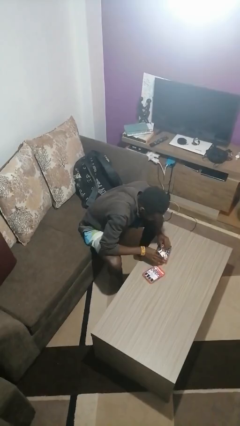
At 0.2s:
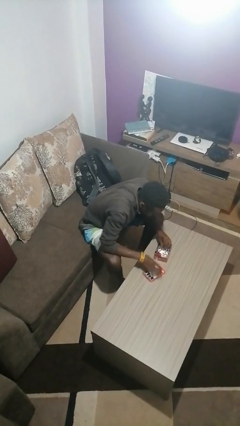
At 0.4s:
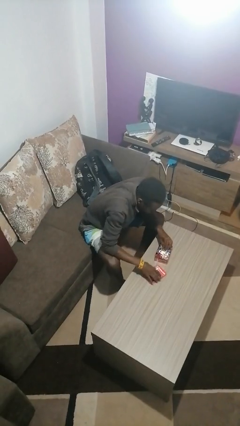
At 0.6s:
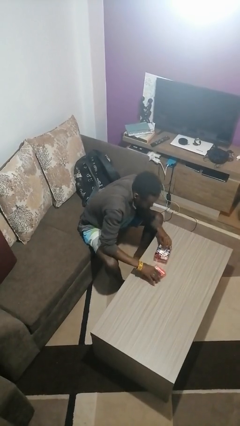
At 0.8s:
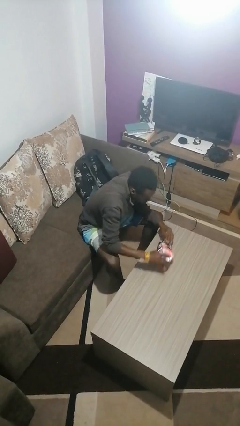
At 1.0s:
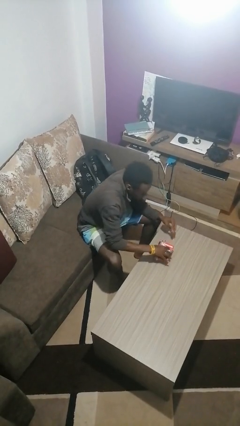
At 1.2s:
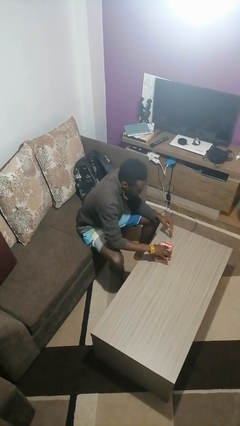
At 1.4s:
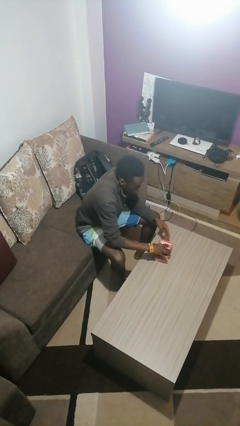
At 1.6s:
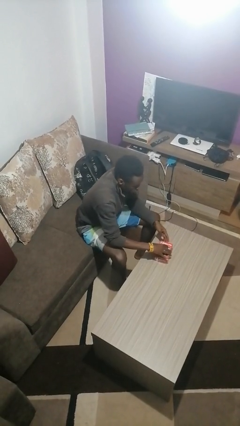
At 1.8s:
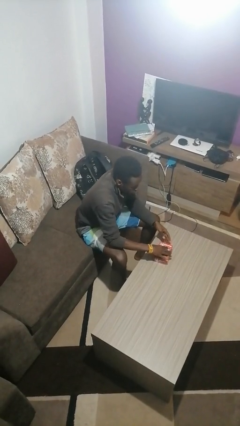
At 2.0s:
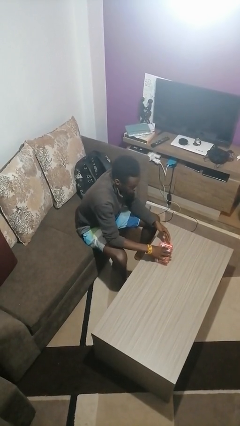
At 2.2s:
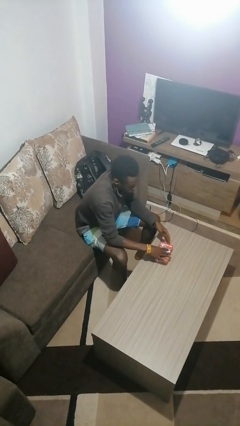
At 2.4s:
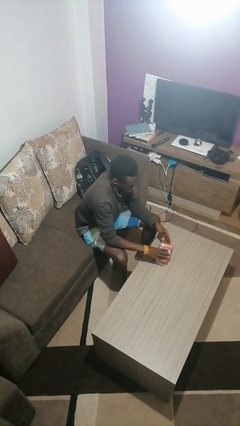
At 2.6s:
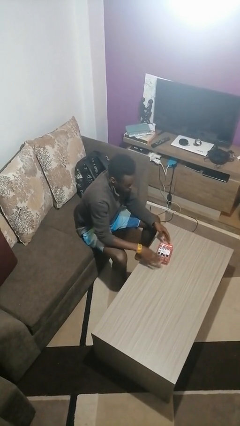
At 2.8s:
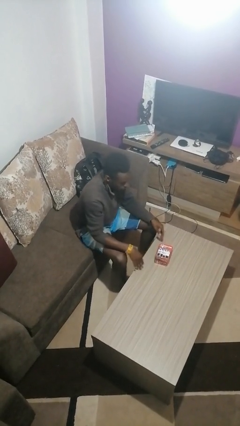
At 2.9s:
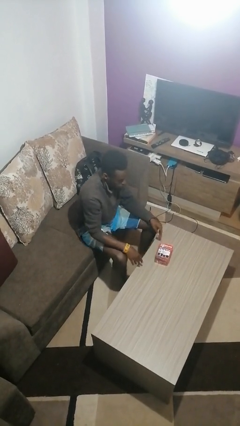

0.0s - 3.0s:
person closes jewelry box

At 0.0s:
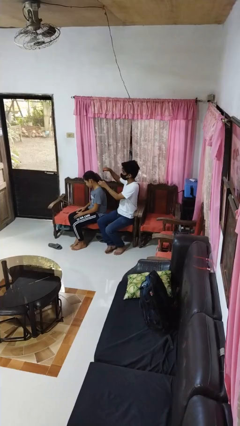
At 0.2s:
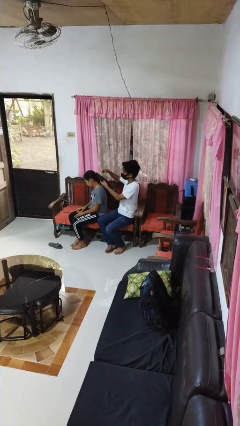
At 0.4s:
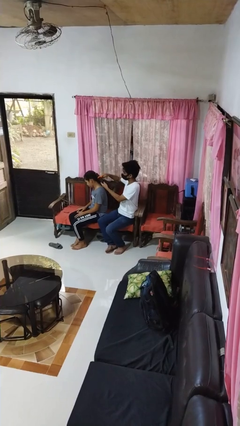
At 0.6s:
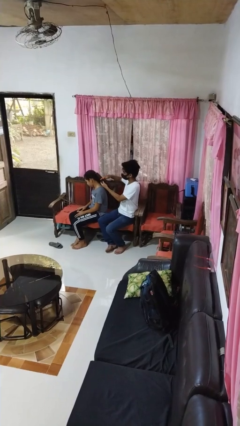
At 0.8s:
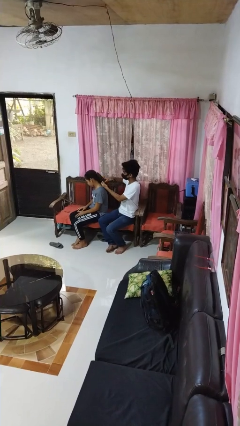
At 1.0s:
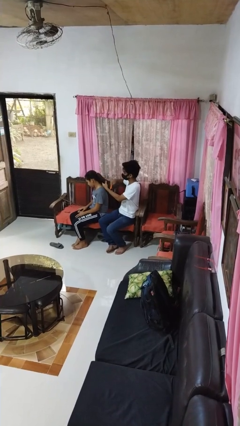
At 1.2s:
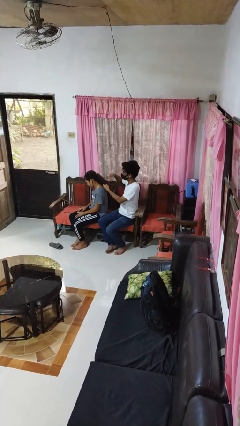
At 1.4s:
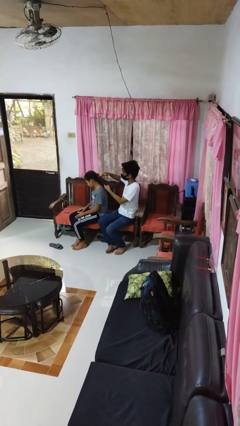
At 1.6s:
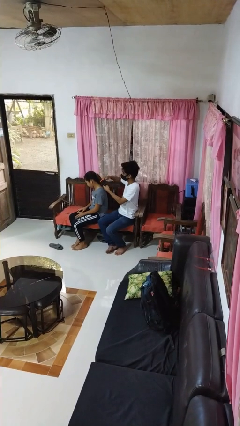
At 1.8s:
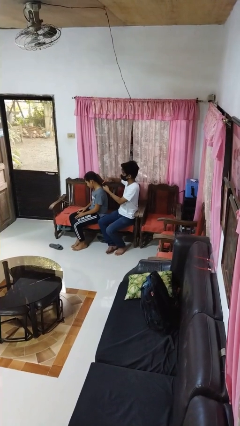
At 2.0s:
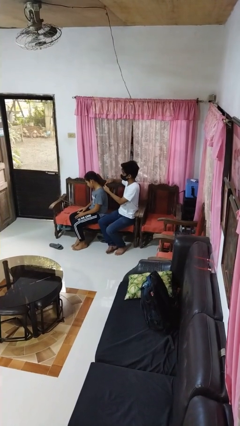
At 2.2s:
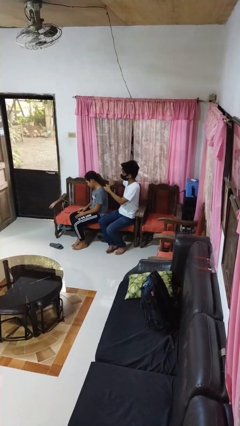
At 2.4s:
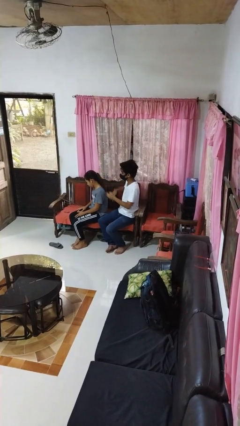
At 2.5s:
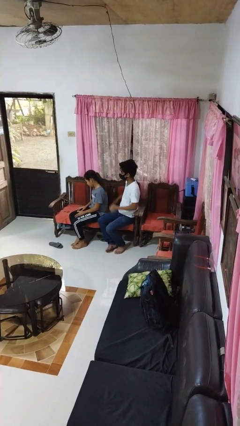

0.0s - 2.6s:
person brushes hair of person

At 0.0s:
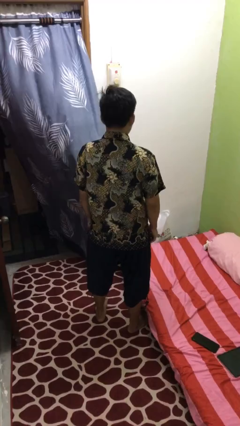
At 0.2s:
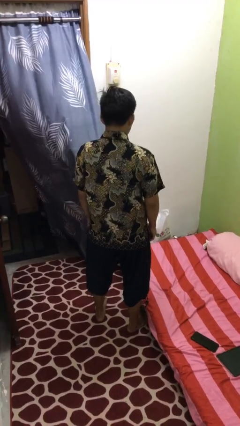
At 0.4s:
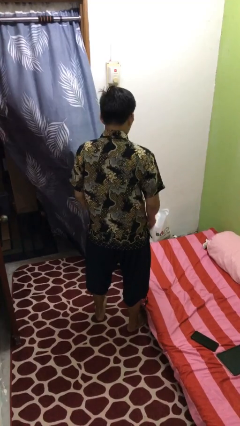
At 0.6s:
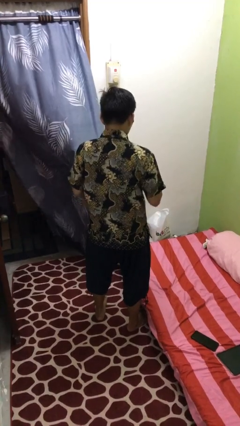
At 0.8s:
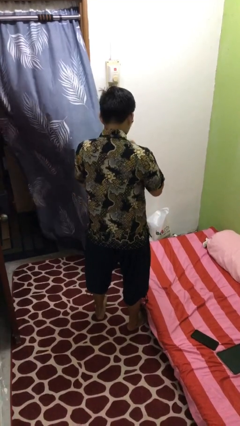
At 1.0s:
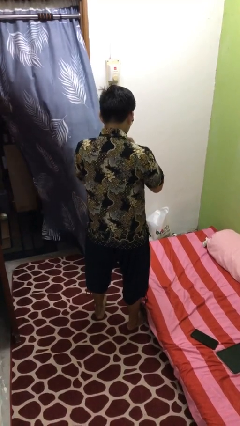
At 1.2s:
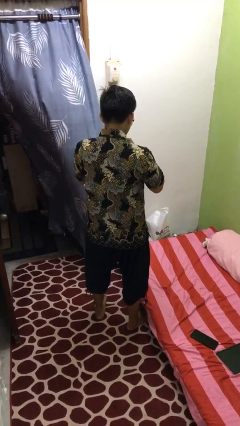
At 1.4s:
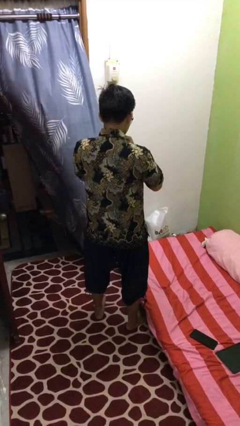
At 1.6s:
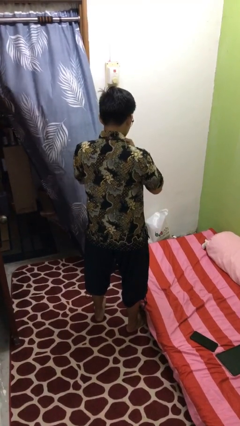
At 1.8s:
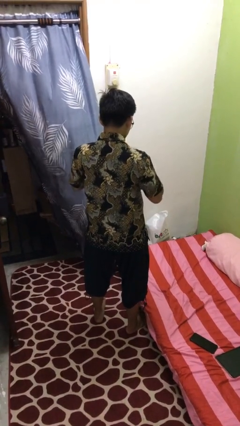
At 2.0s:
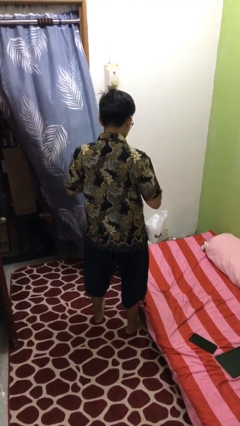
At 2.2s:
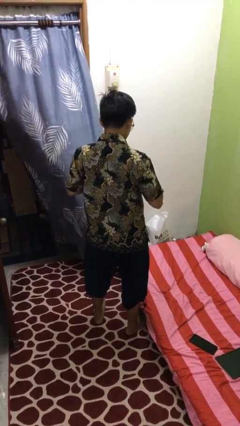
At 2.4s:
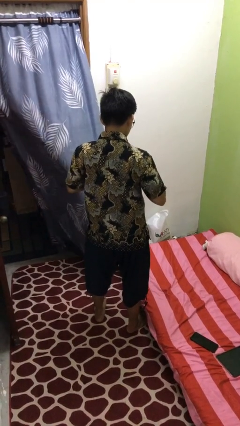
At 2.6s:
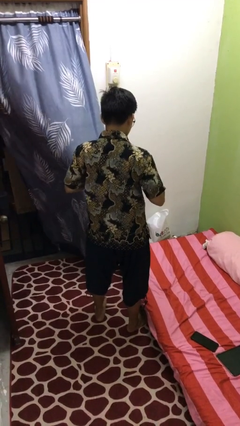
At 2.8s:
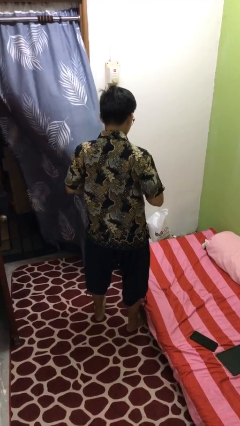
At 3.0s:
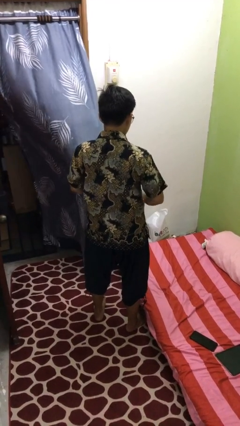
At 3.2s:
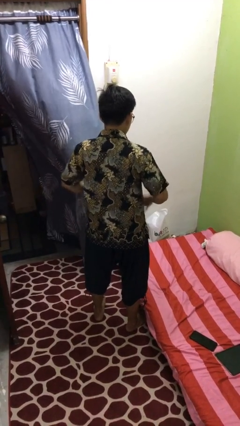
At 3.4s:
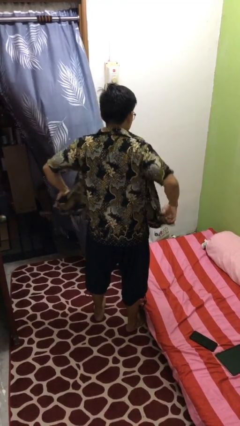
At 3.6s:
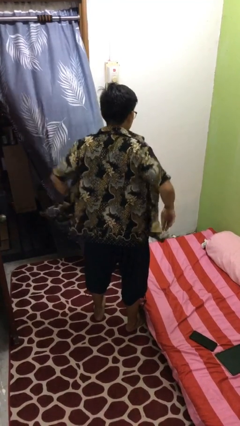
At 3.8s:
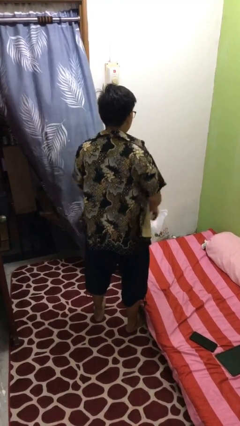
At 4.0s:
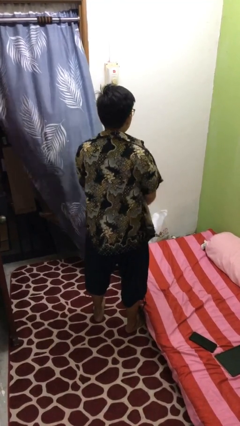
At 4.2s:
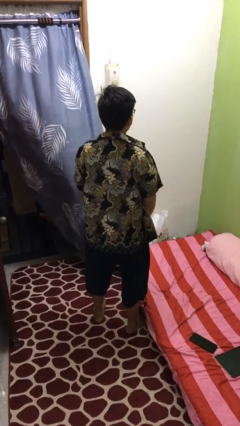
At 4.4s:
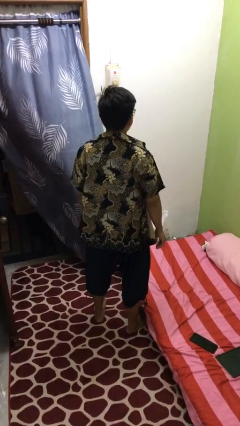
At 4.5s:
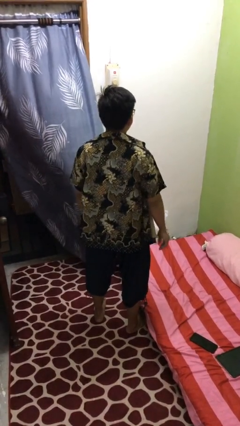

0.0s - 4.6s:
person unbuttons shirt

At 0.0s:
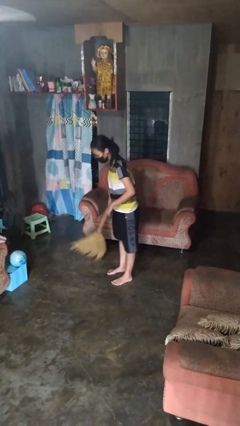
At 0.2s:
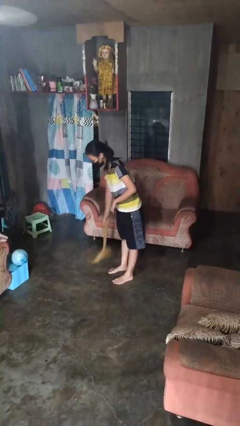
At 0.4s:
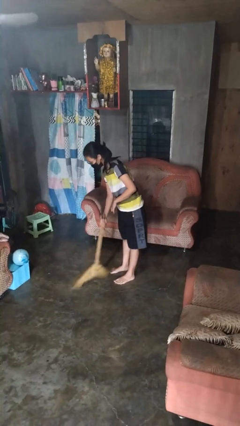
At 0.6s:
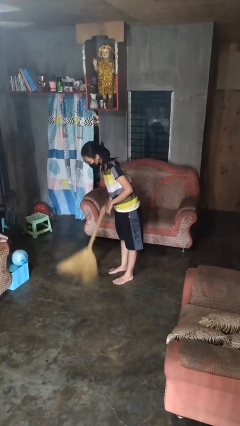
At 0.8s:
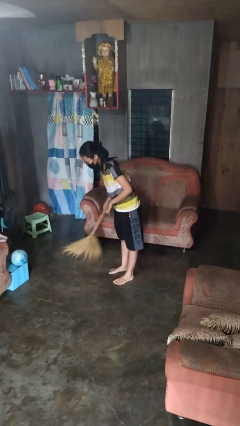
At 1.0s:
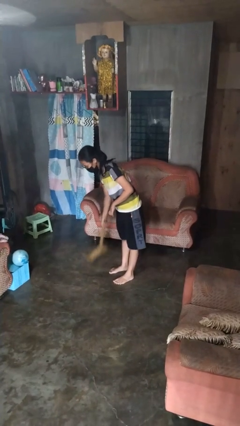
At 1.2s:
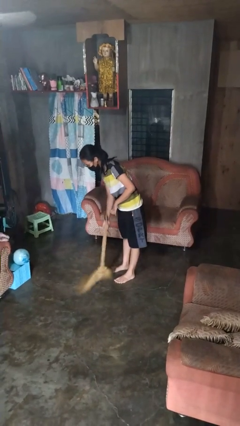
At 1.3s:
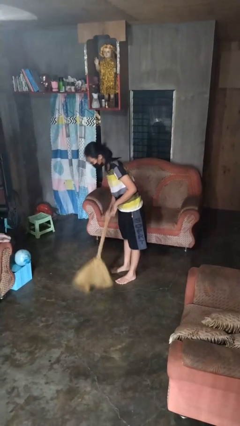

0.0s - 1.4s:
person sweeps floor

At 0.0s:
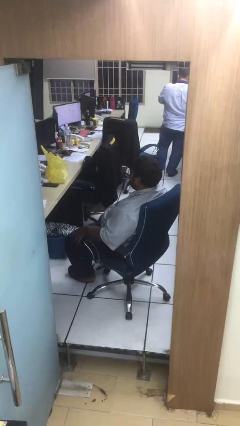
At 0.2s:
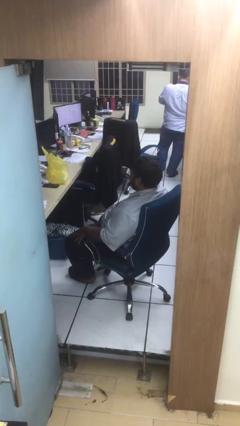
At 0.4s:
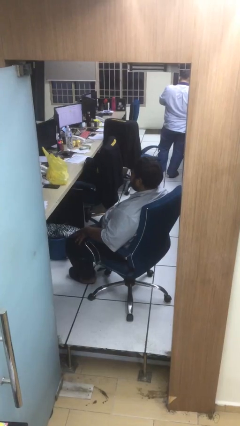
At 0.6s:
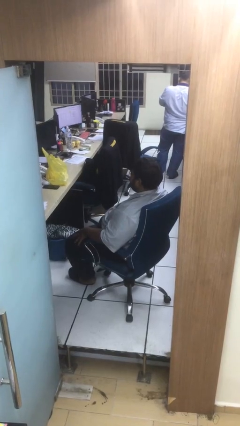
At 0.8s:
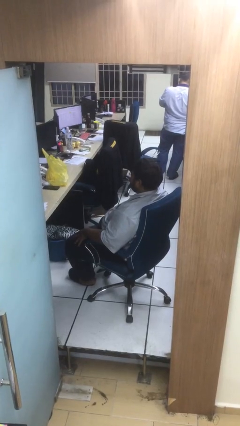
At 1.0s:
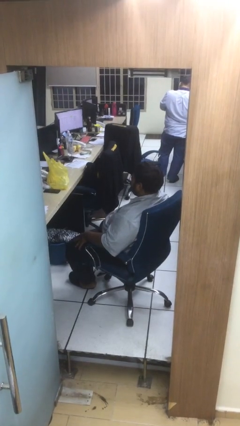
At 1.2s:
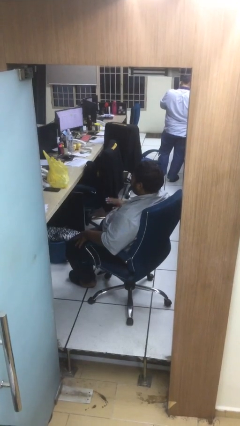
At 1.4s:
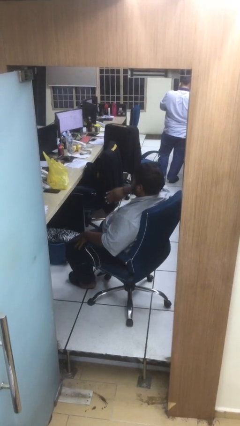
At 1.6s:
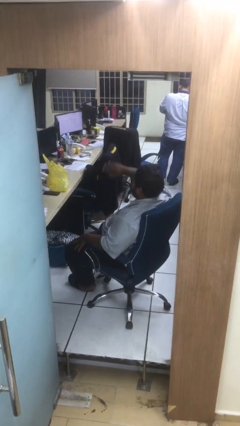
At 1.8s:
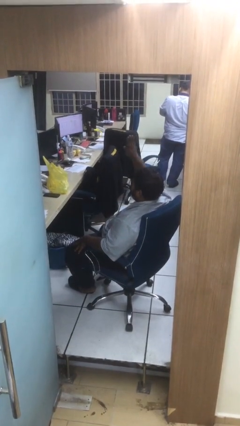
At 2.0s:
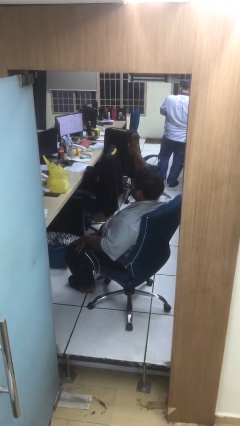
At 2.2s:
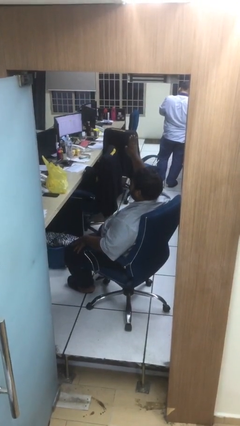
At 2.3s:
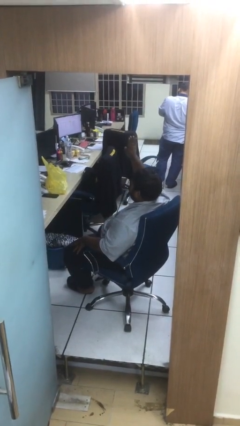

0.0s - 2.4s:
person gestures swipe up

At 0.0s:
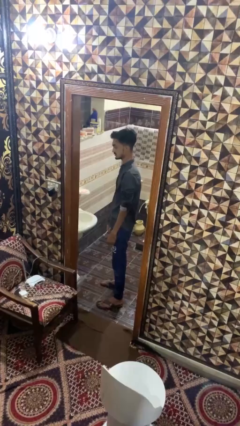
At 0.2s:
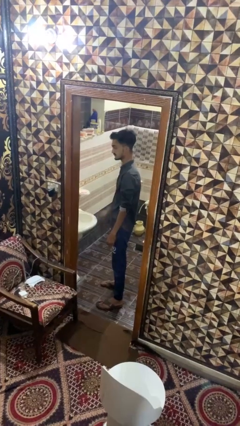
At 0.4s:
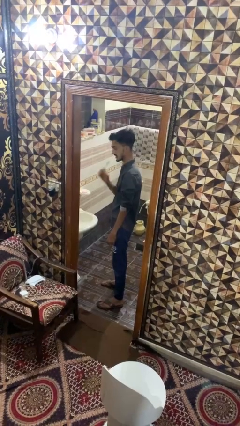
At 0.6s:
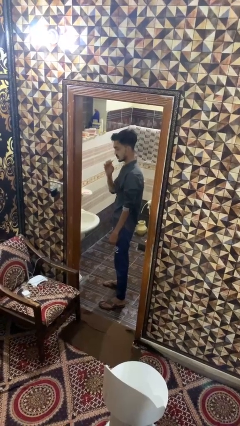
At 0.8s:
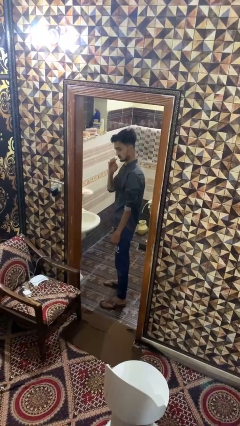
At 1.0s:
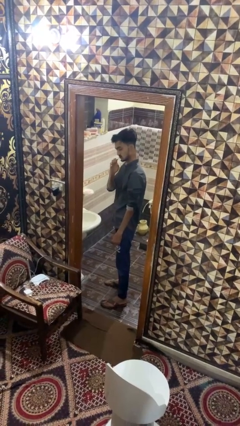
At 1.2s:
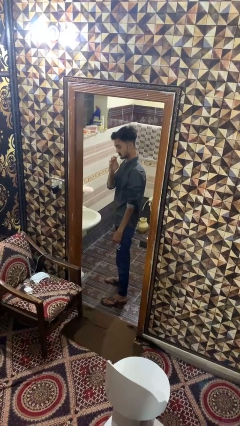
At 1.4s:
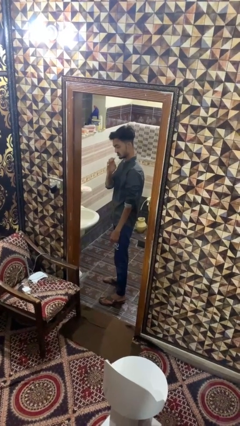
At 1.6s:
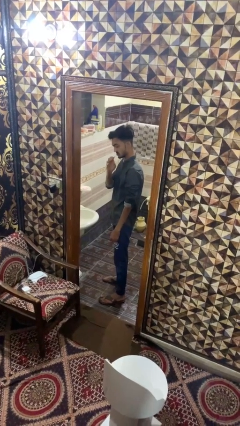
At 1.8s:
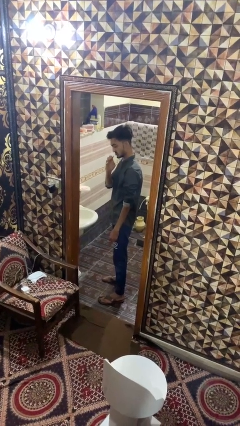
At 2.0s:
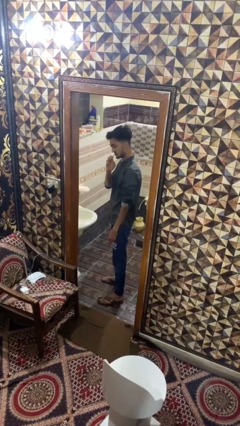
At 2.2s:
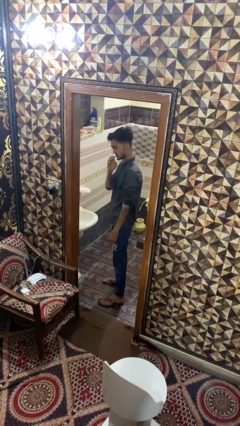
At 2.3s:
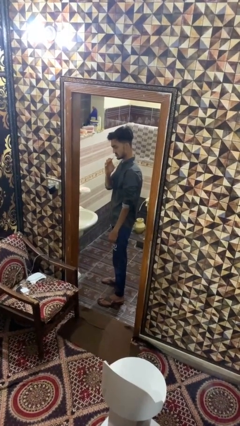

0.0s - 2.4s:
person brushes teeth

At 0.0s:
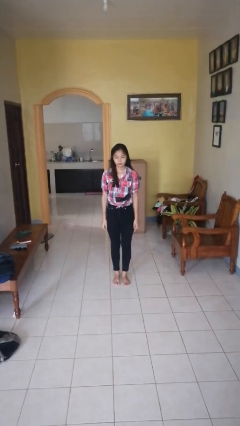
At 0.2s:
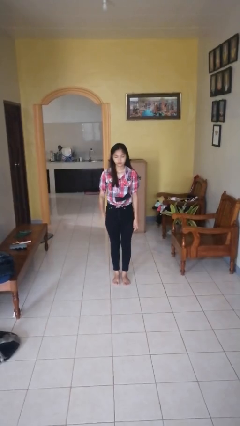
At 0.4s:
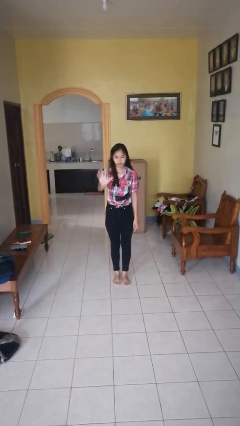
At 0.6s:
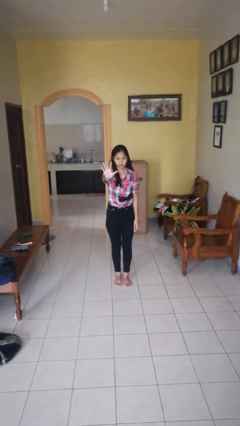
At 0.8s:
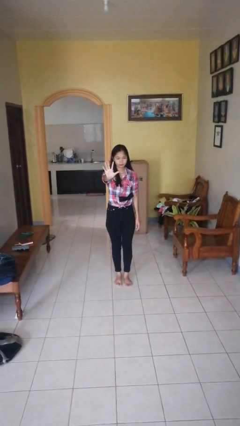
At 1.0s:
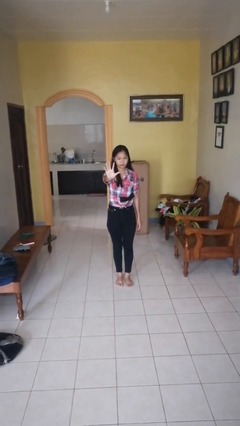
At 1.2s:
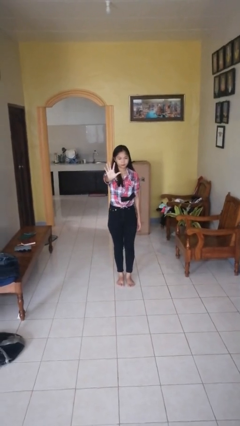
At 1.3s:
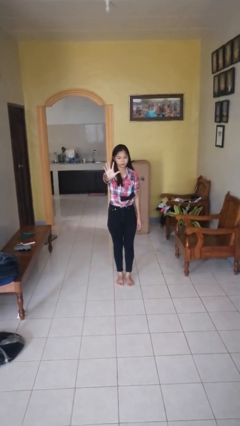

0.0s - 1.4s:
person gestures number five
